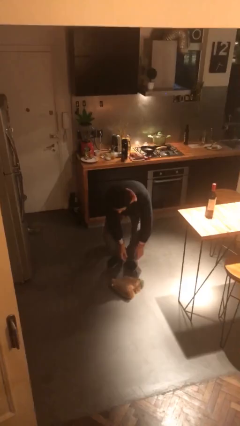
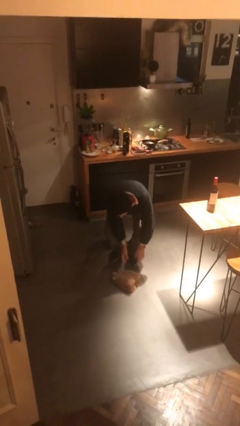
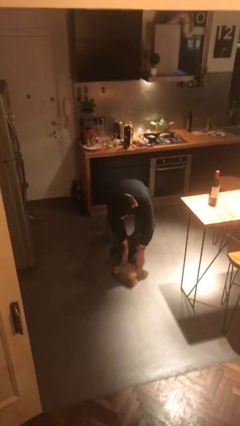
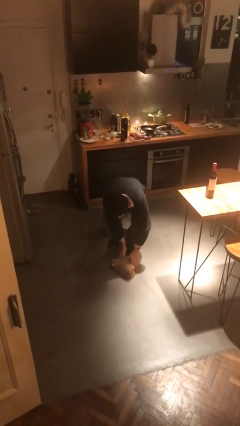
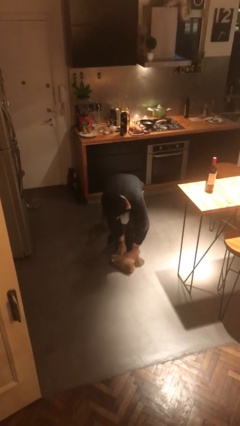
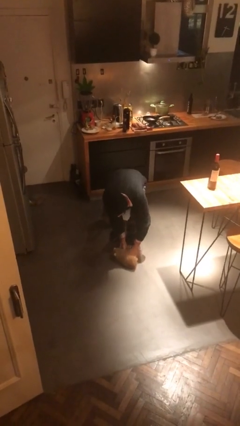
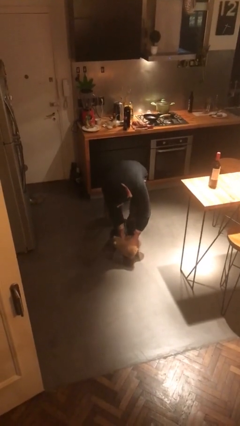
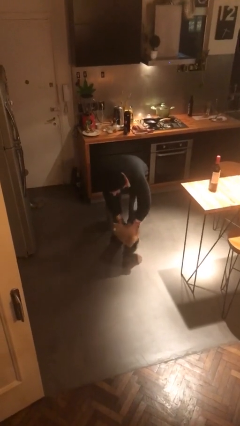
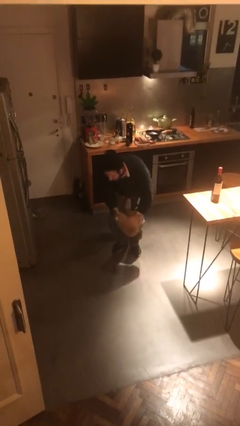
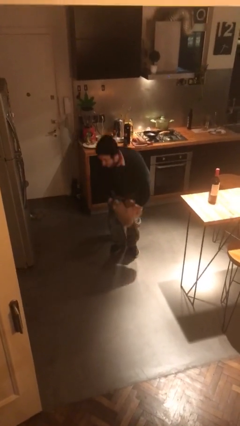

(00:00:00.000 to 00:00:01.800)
person picks up object from floor

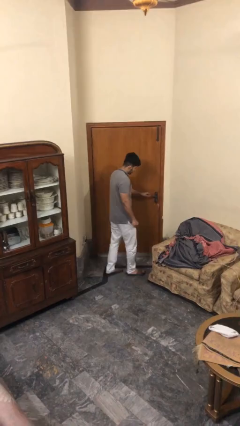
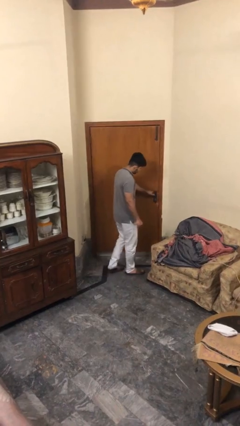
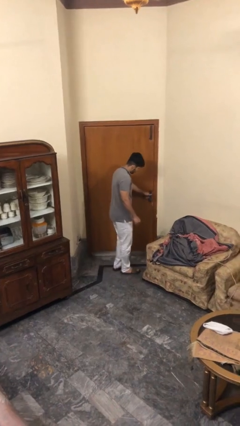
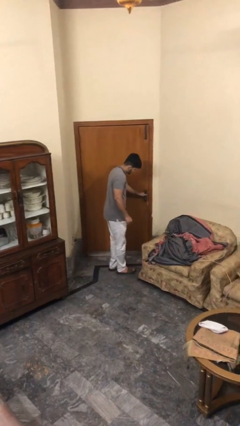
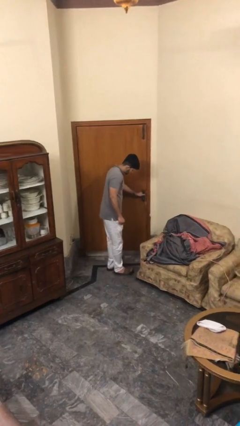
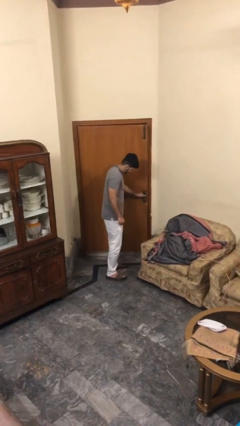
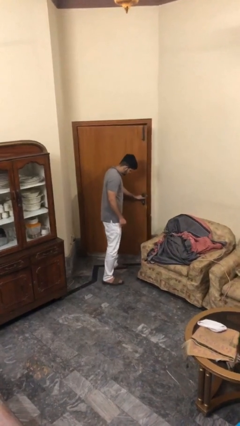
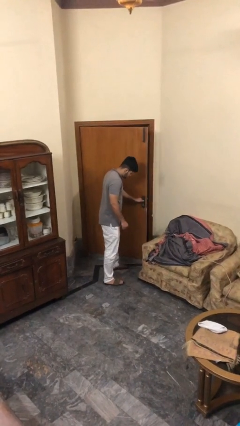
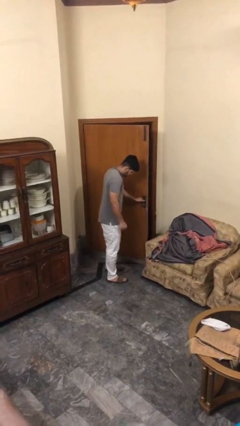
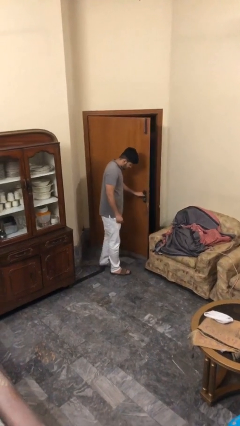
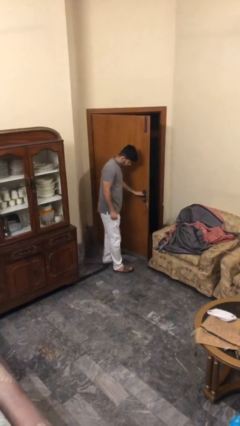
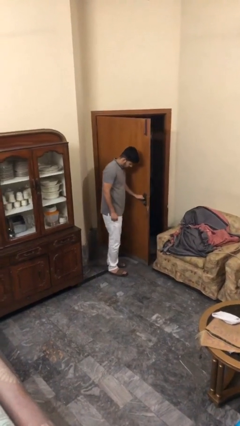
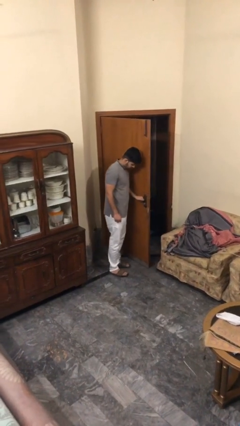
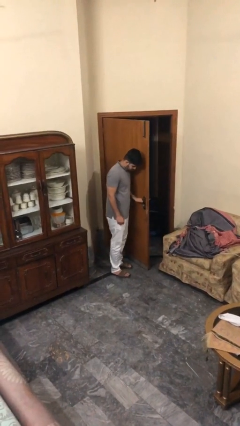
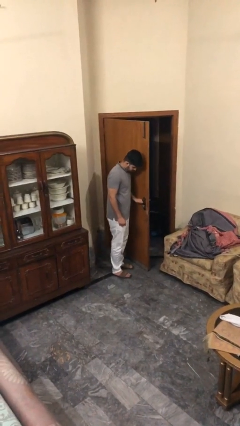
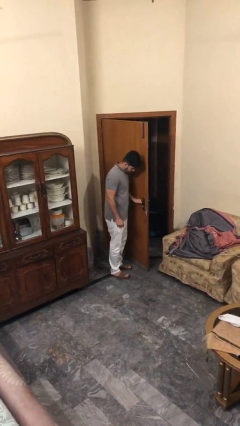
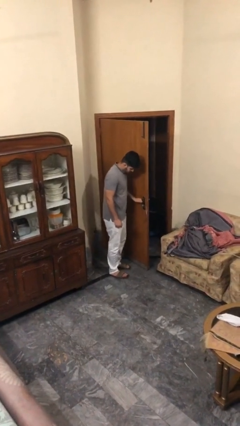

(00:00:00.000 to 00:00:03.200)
person opens facility door

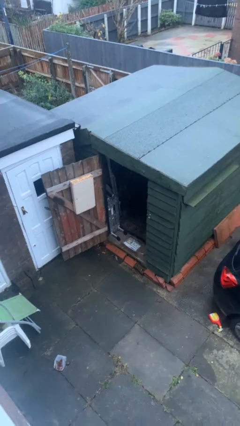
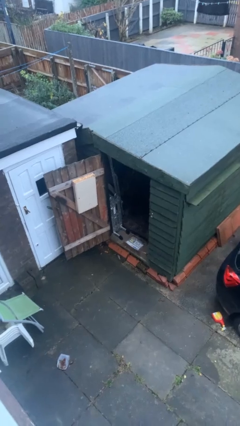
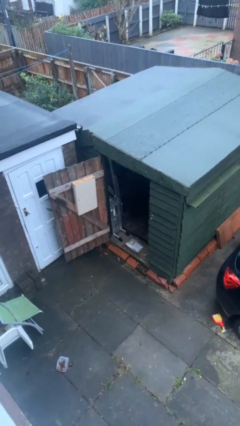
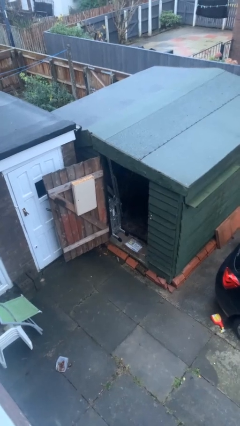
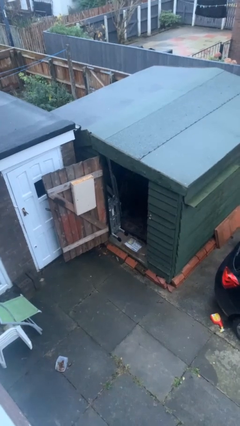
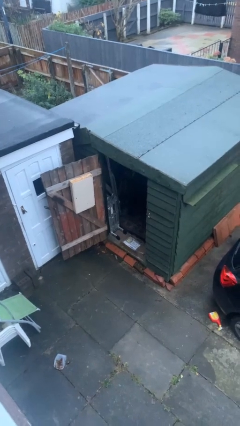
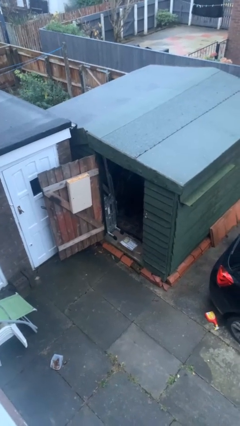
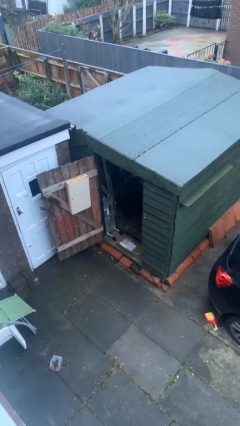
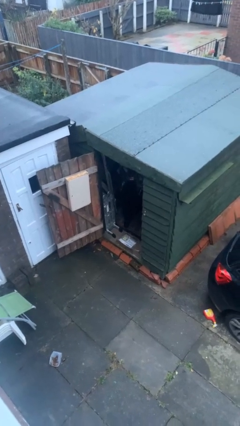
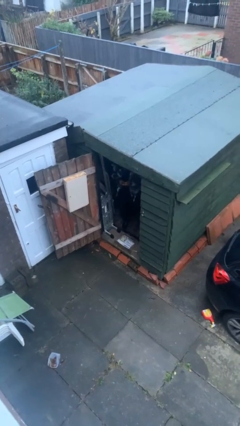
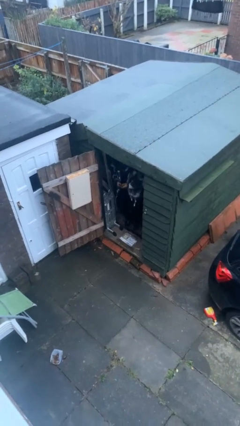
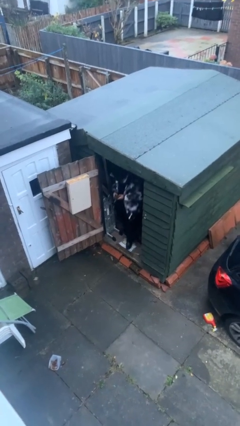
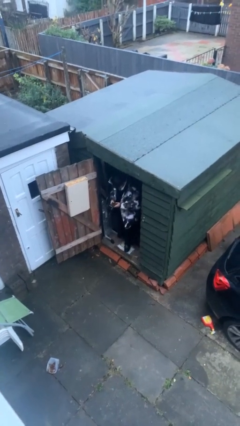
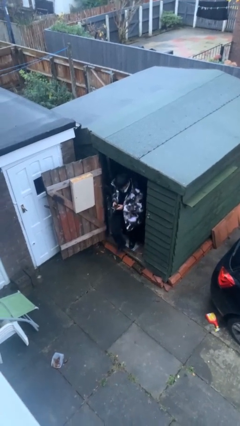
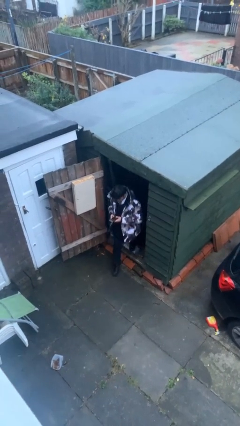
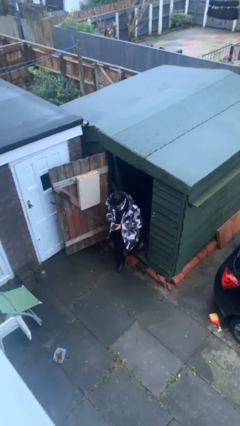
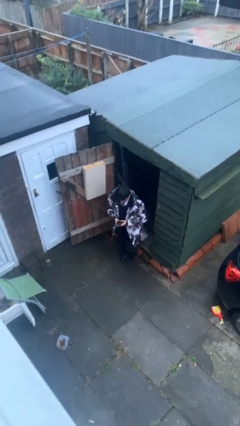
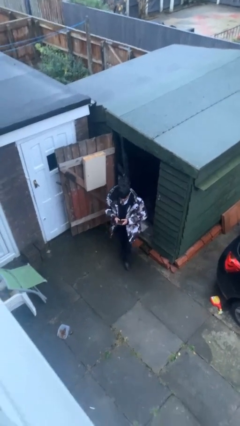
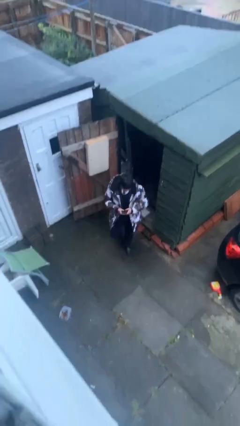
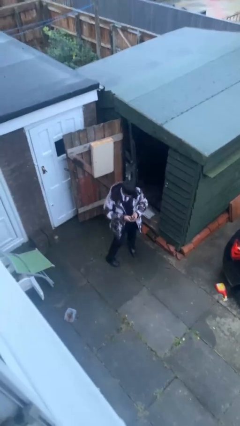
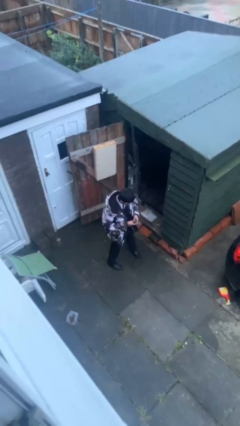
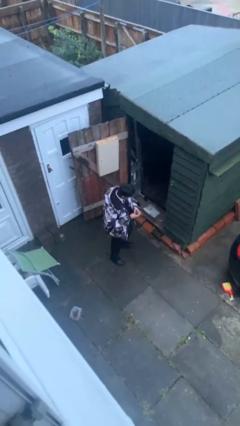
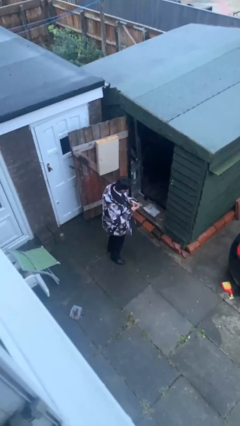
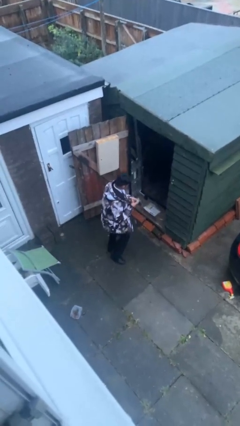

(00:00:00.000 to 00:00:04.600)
person enters scene through structure

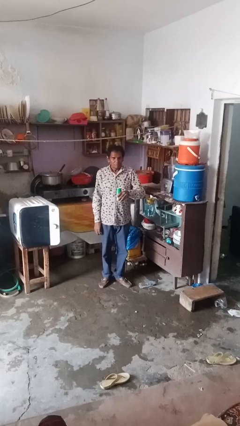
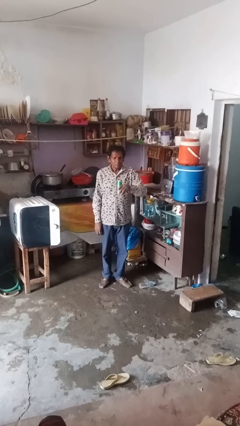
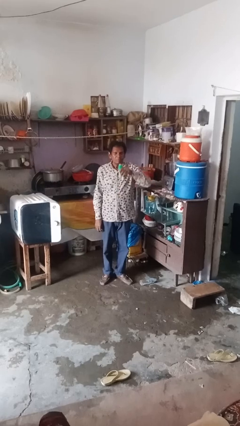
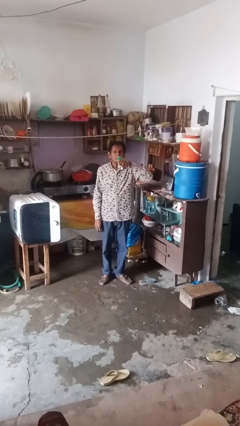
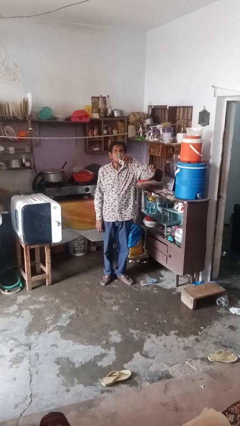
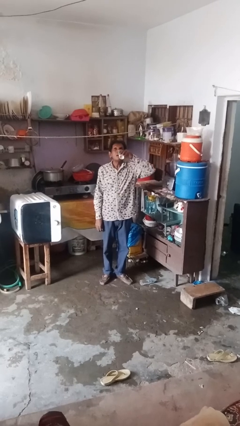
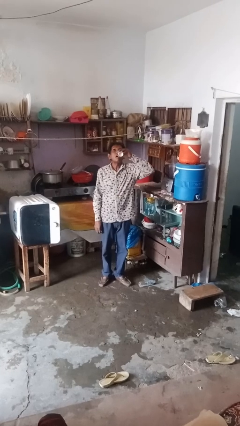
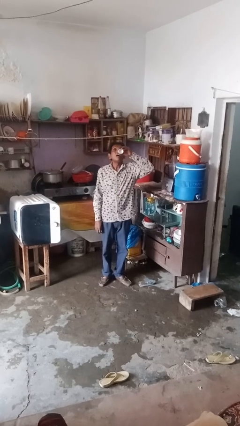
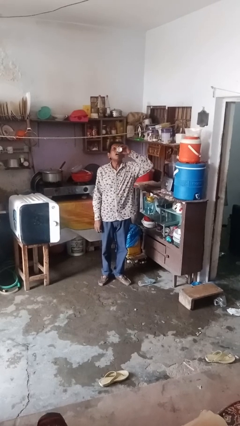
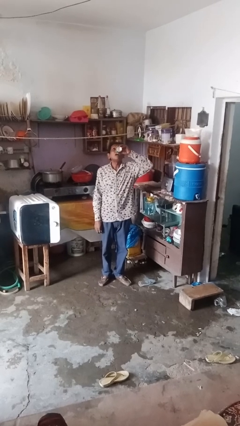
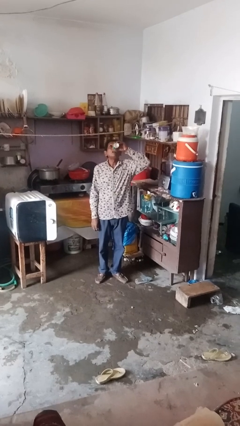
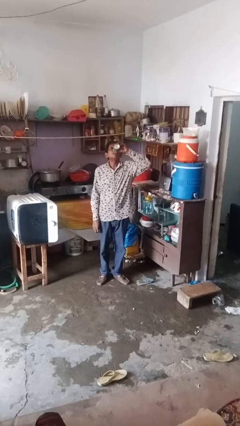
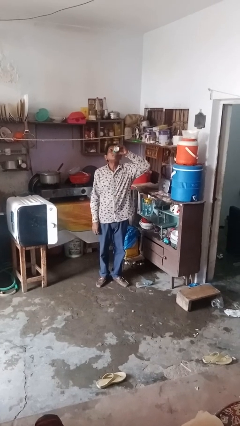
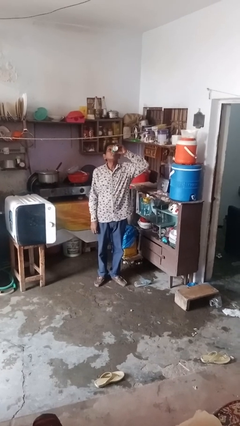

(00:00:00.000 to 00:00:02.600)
person drinks from beverage can

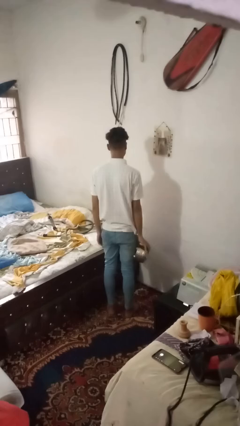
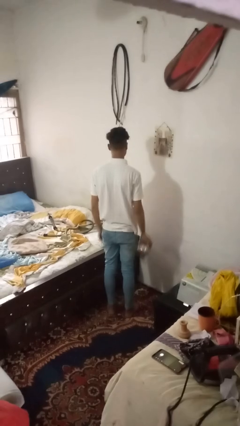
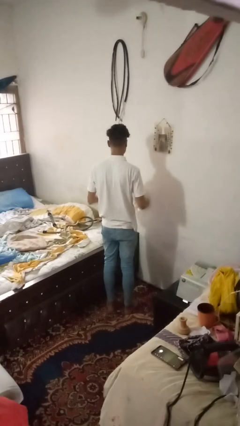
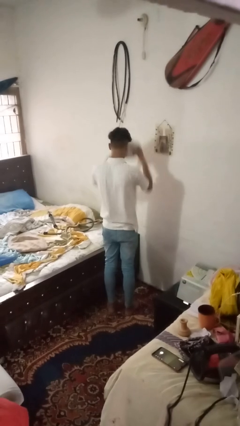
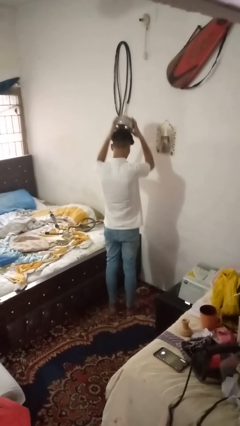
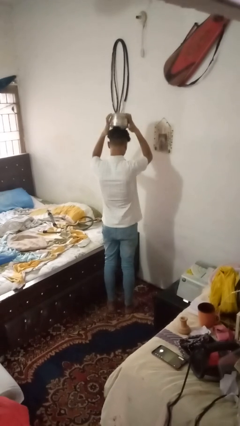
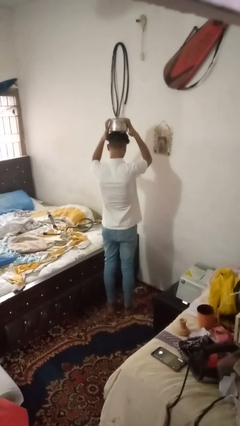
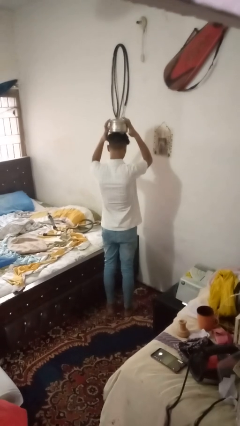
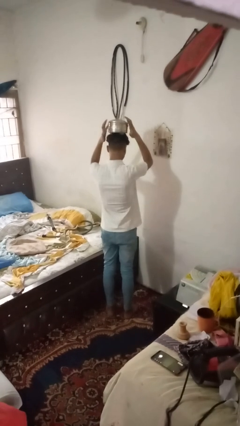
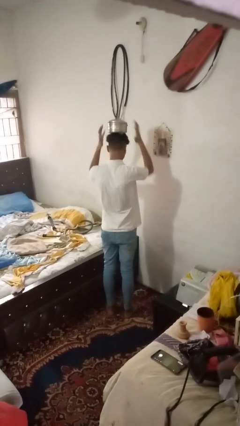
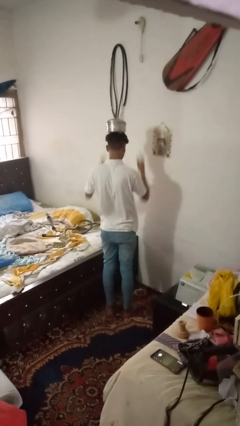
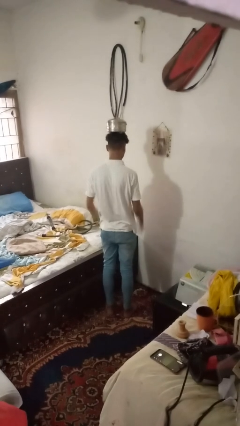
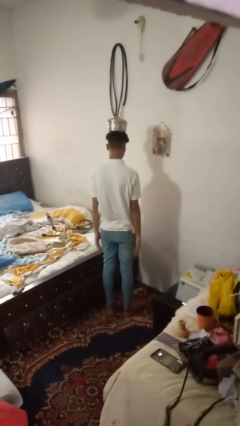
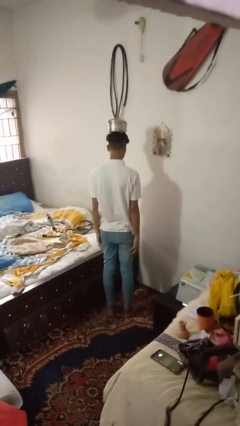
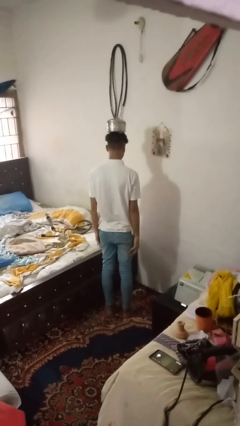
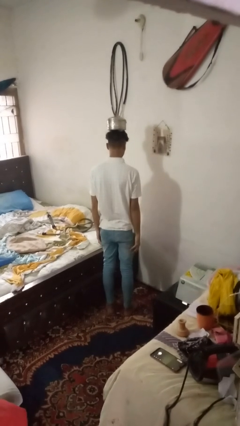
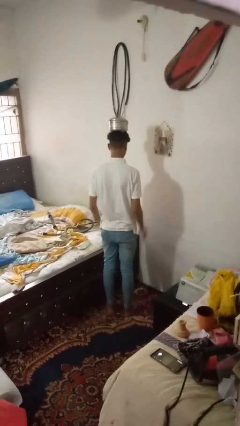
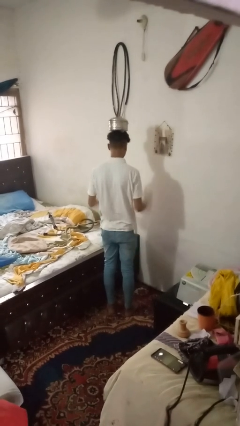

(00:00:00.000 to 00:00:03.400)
person holds object above head

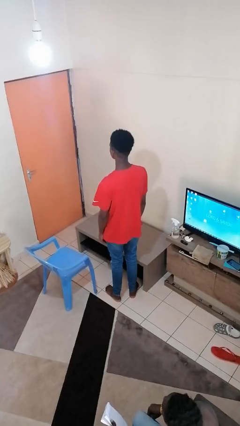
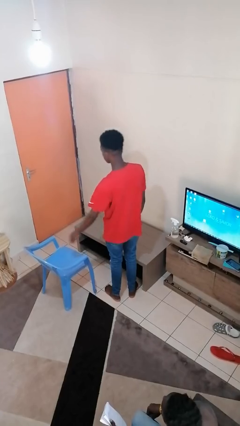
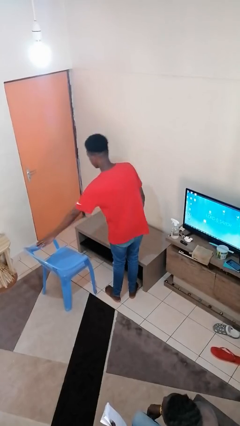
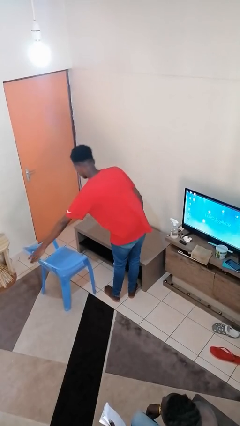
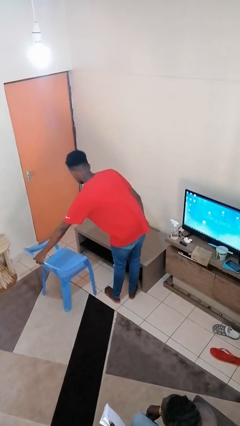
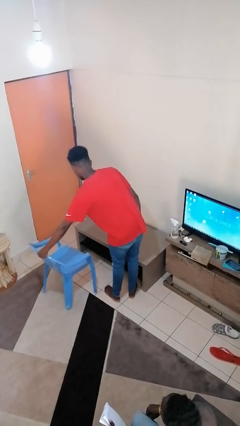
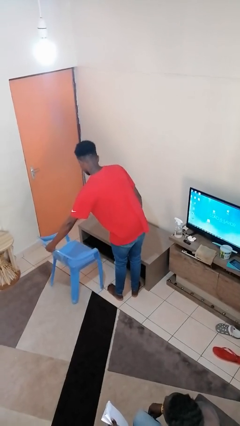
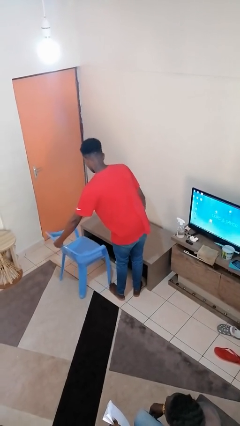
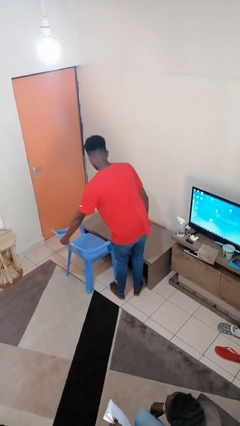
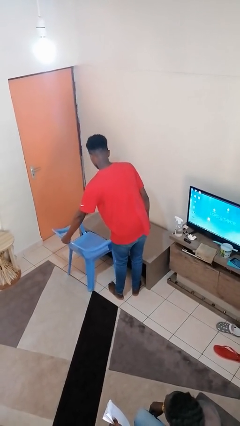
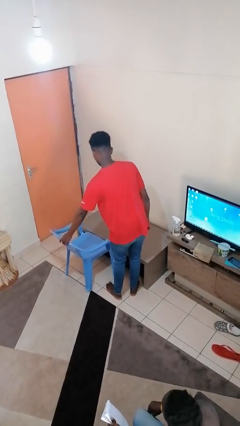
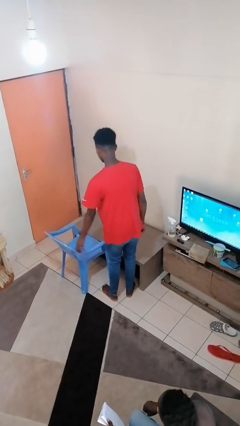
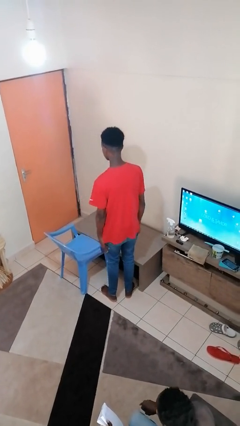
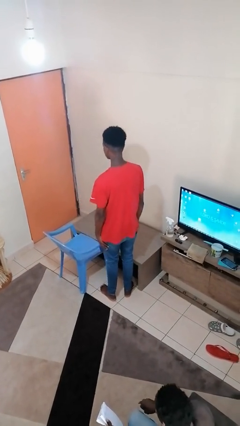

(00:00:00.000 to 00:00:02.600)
person pushes in chair
